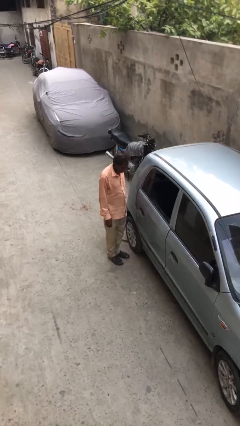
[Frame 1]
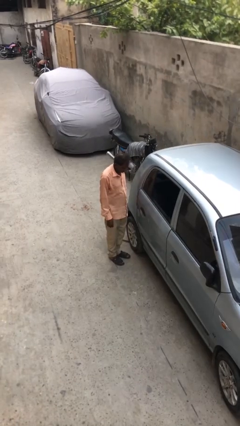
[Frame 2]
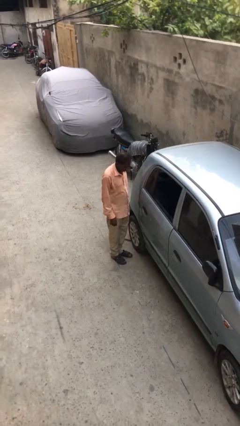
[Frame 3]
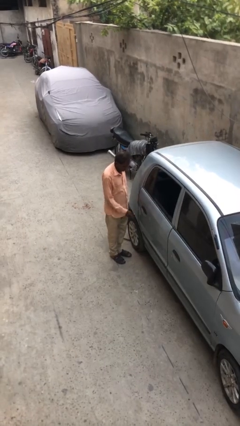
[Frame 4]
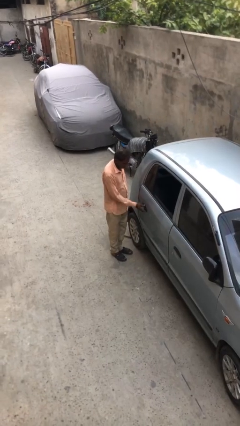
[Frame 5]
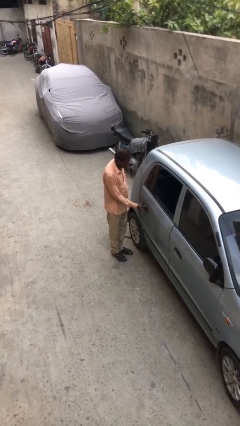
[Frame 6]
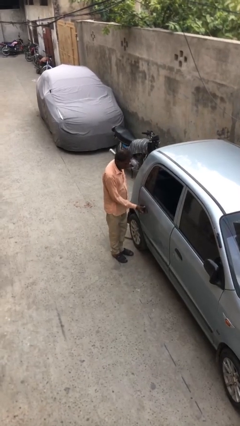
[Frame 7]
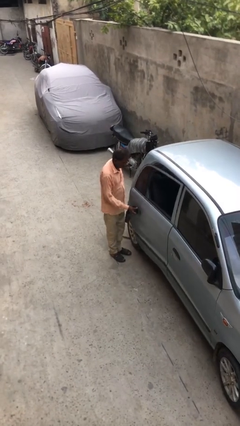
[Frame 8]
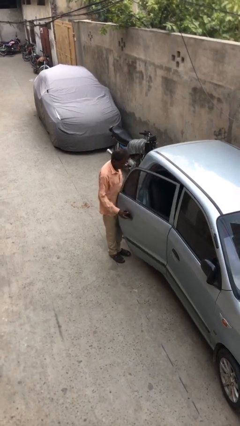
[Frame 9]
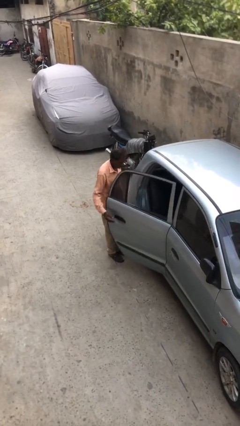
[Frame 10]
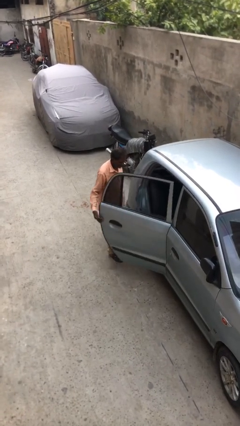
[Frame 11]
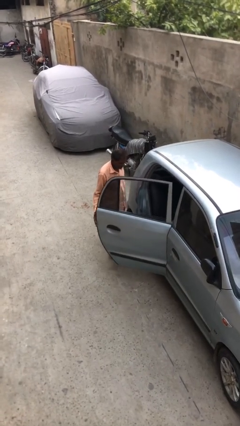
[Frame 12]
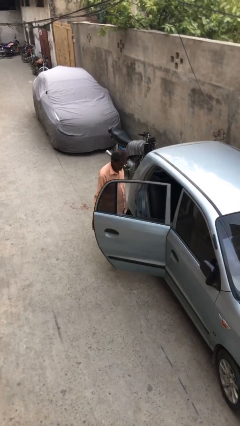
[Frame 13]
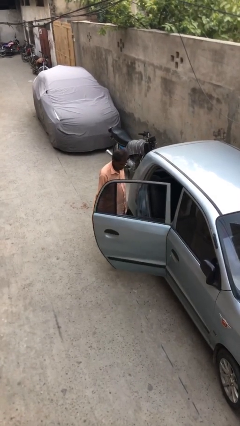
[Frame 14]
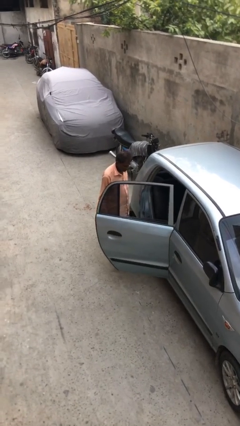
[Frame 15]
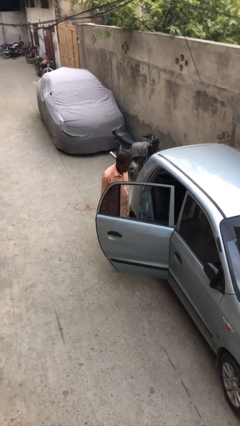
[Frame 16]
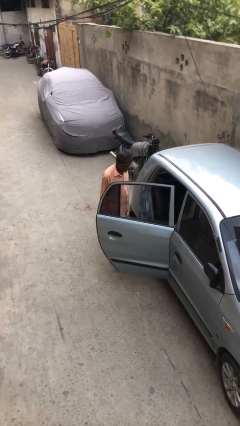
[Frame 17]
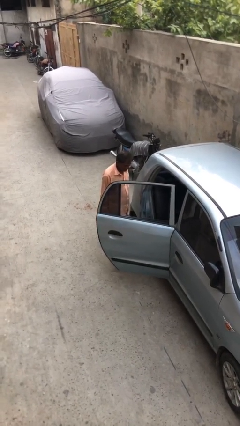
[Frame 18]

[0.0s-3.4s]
person opens car door

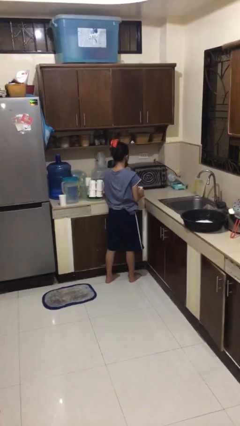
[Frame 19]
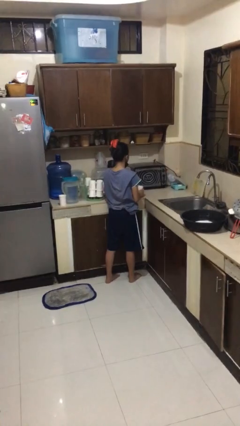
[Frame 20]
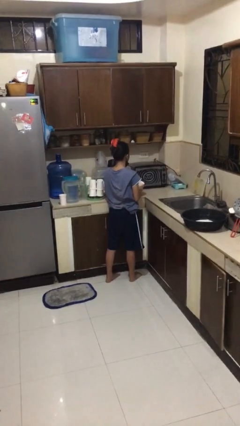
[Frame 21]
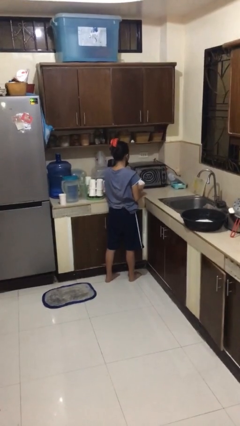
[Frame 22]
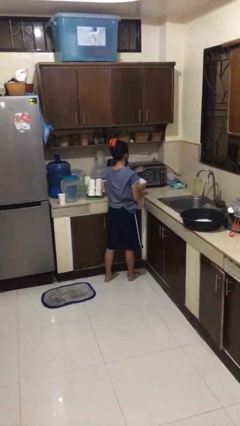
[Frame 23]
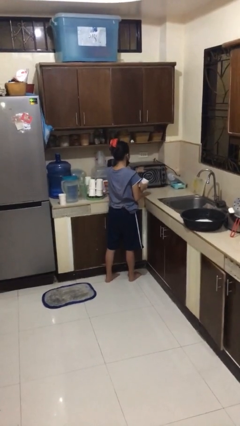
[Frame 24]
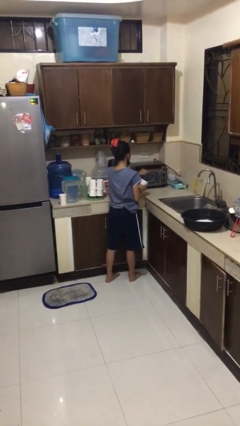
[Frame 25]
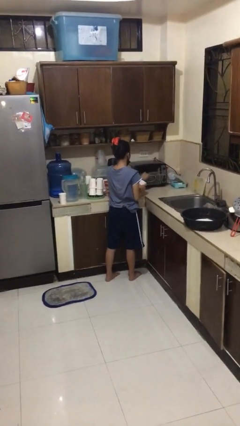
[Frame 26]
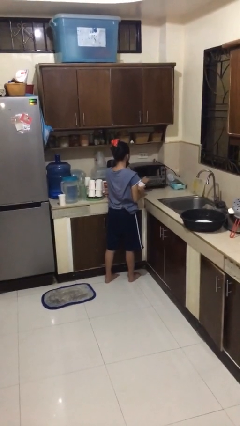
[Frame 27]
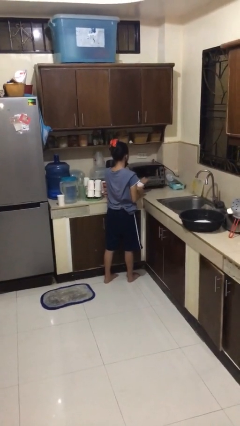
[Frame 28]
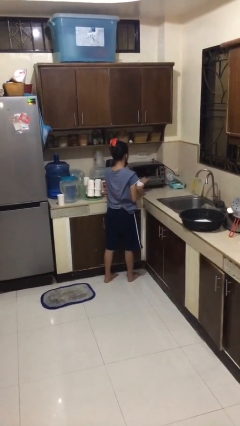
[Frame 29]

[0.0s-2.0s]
person opens microwave

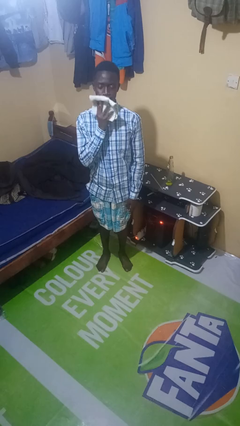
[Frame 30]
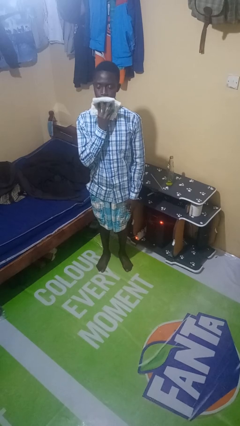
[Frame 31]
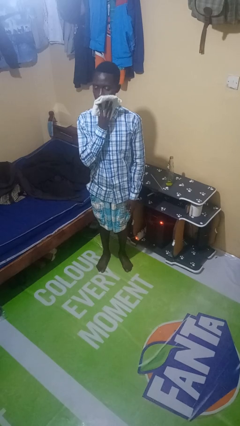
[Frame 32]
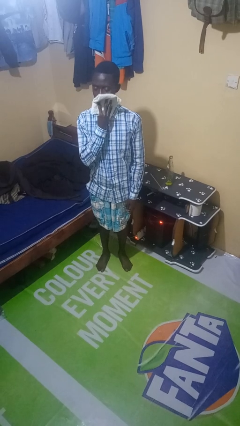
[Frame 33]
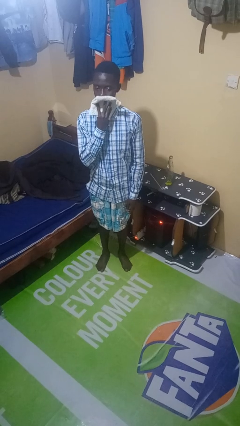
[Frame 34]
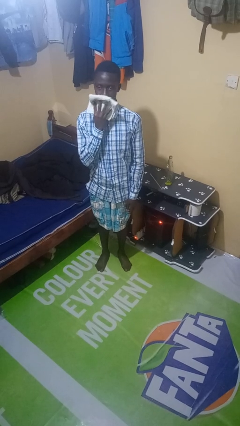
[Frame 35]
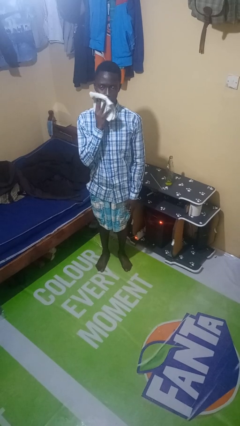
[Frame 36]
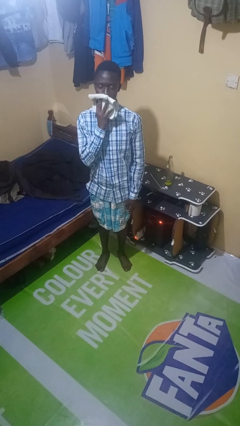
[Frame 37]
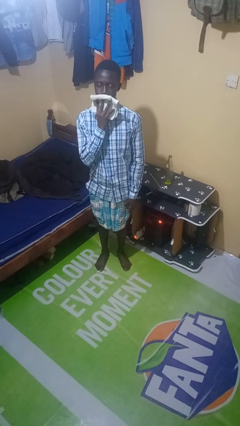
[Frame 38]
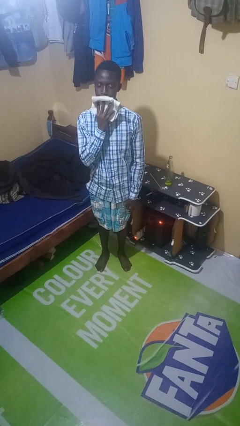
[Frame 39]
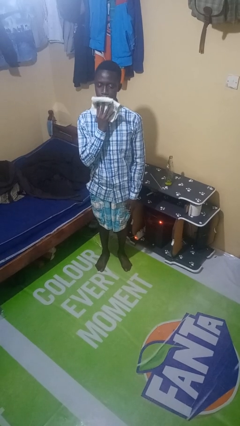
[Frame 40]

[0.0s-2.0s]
person wipes mouth with napkin

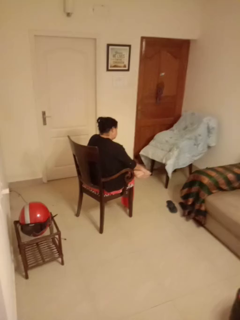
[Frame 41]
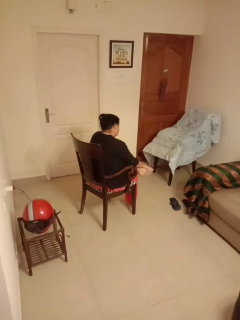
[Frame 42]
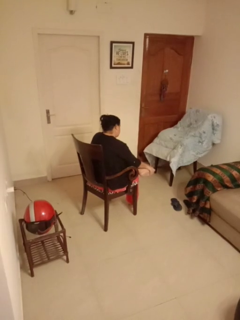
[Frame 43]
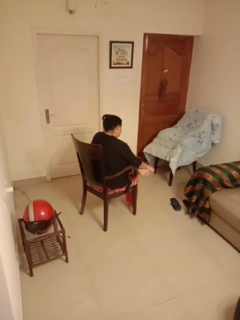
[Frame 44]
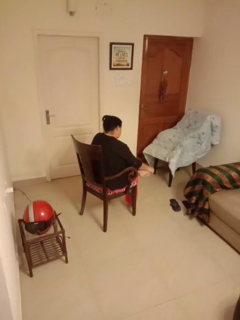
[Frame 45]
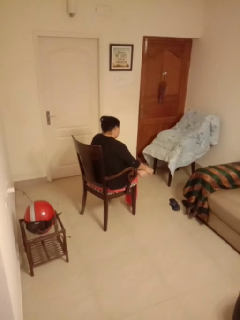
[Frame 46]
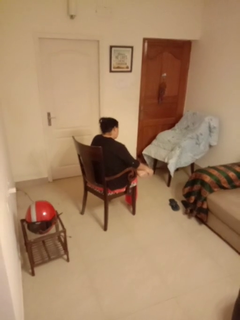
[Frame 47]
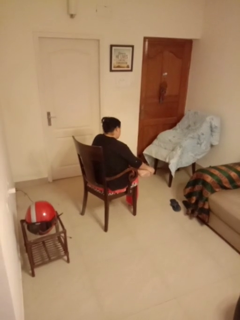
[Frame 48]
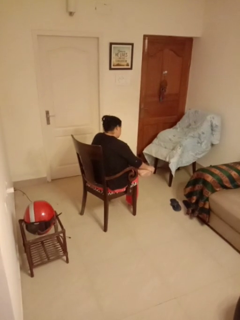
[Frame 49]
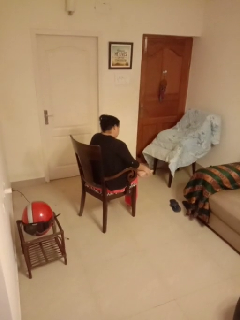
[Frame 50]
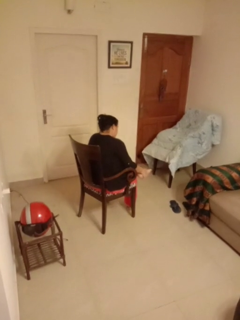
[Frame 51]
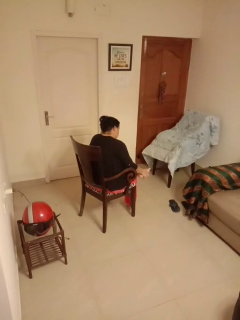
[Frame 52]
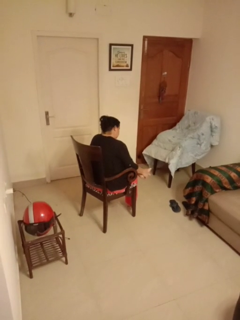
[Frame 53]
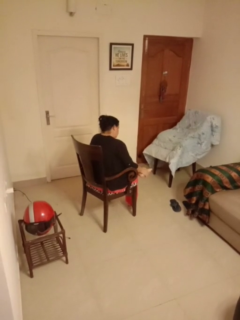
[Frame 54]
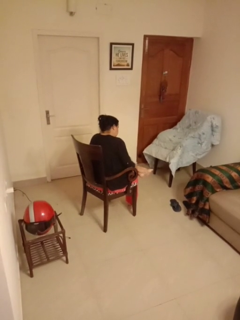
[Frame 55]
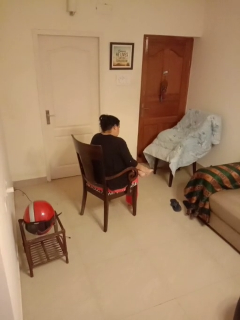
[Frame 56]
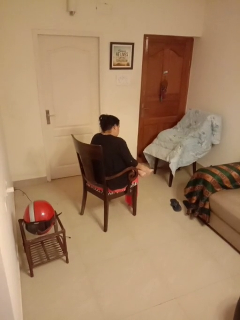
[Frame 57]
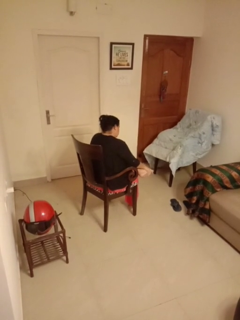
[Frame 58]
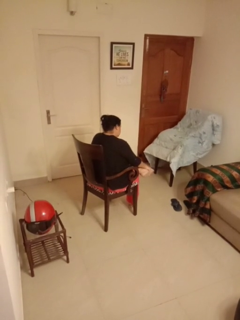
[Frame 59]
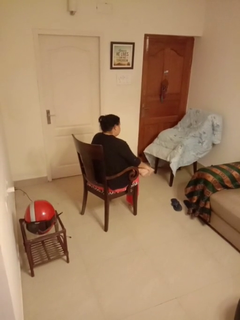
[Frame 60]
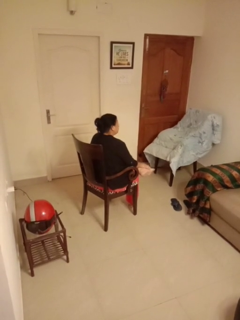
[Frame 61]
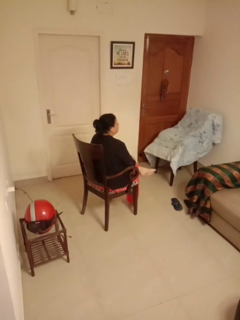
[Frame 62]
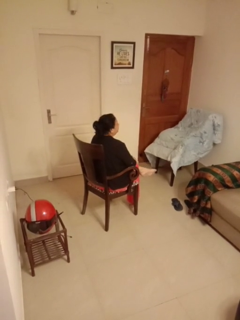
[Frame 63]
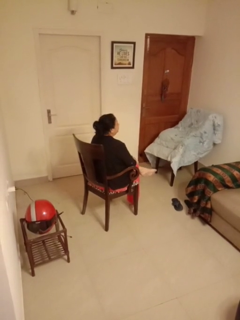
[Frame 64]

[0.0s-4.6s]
person rubs foot

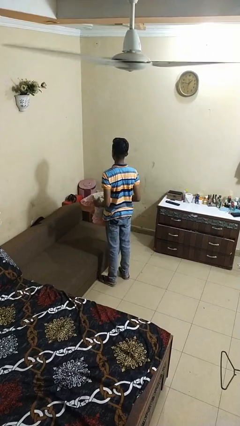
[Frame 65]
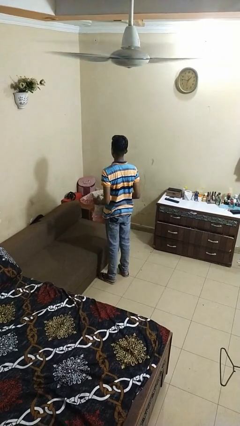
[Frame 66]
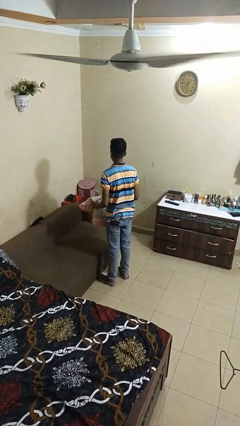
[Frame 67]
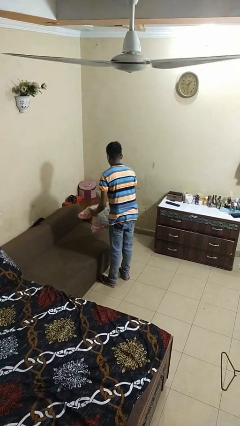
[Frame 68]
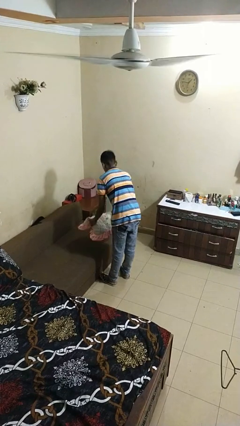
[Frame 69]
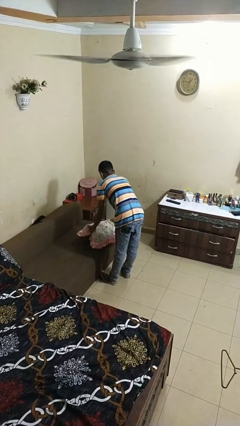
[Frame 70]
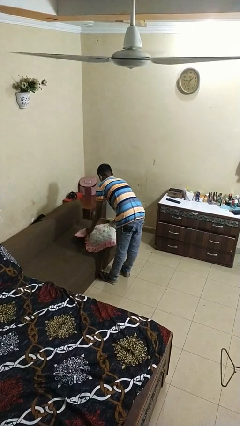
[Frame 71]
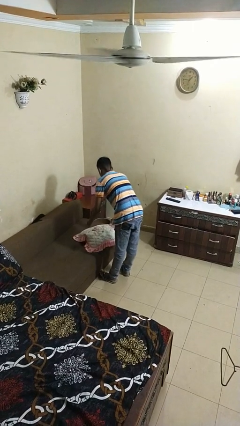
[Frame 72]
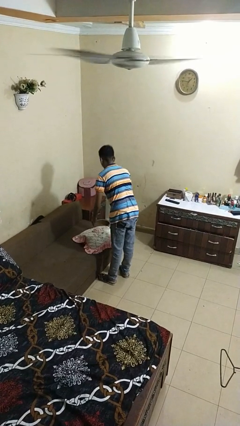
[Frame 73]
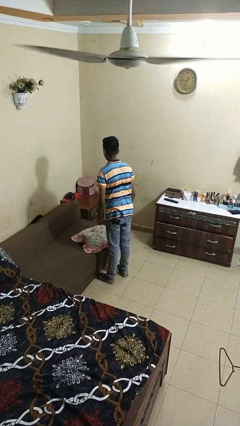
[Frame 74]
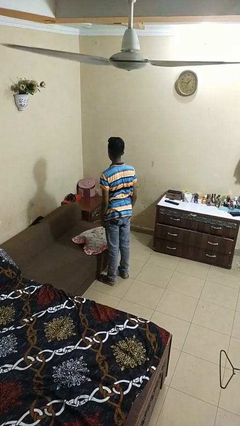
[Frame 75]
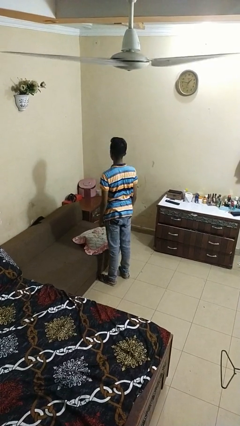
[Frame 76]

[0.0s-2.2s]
person puts down object on couch

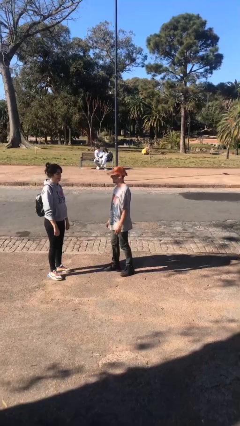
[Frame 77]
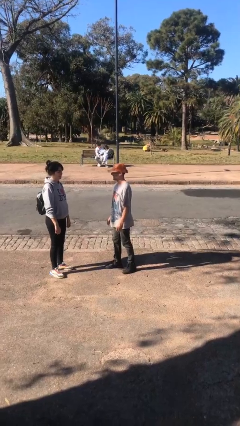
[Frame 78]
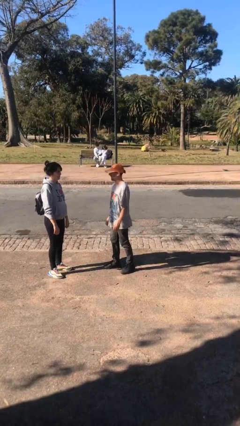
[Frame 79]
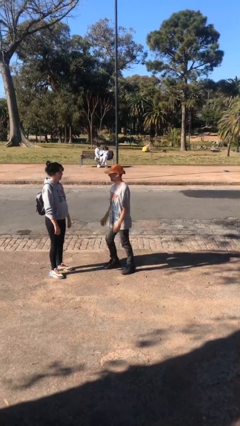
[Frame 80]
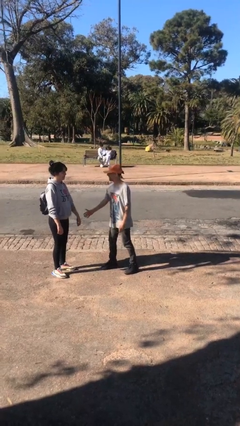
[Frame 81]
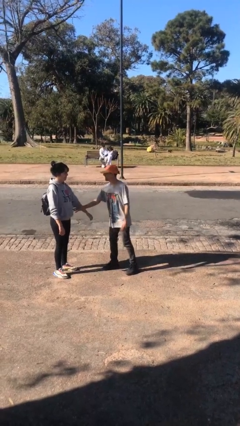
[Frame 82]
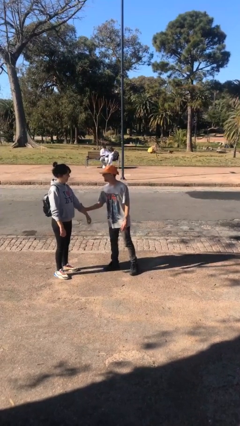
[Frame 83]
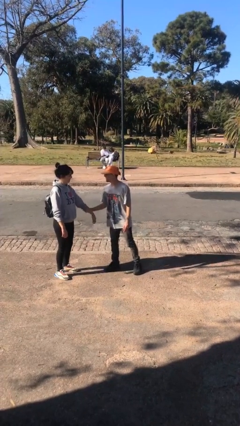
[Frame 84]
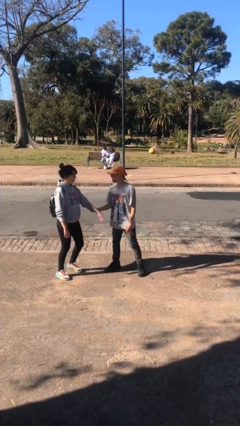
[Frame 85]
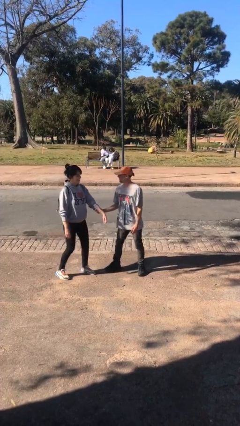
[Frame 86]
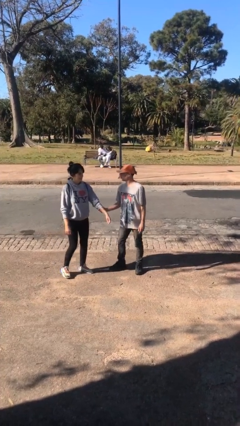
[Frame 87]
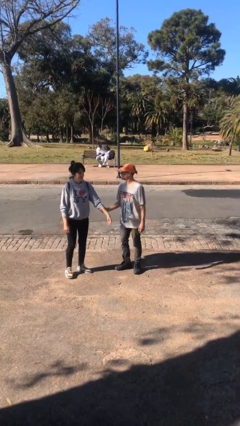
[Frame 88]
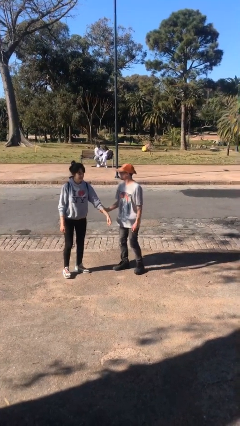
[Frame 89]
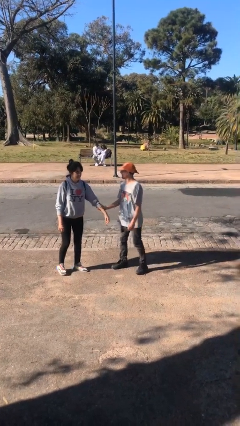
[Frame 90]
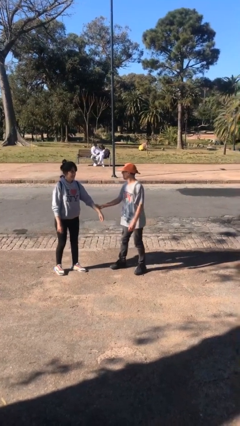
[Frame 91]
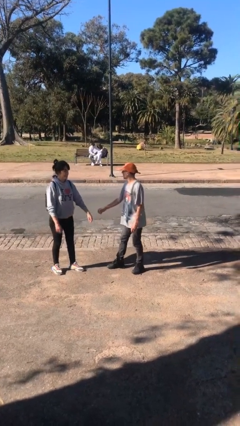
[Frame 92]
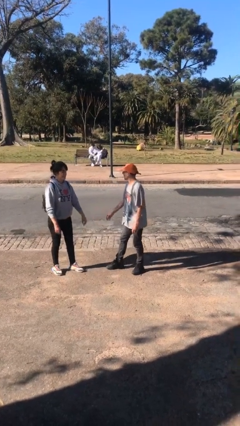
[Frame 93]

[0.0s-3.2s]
person grabs person by forearm

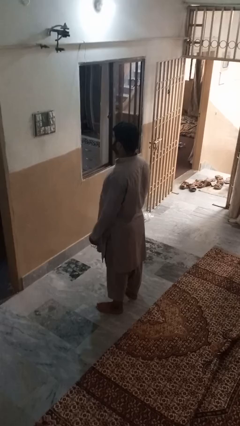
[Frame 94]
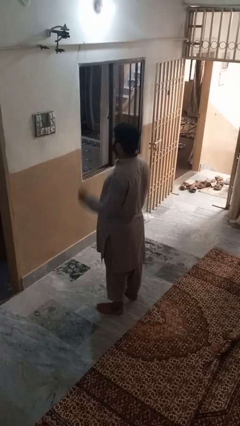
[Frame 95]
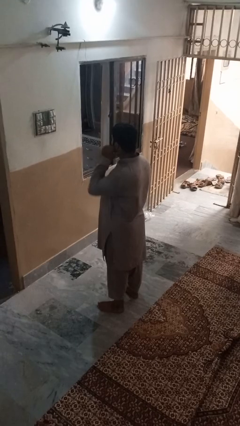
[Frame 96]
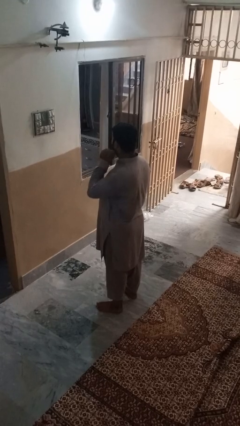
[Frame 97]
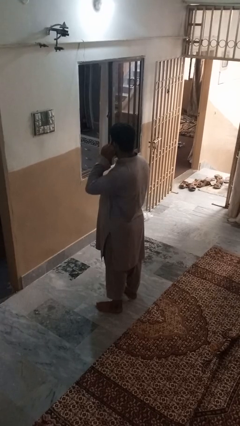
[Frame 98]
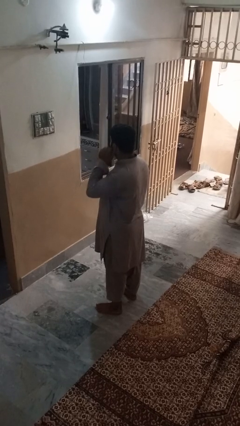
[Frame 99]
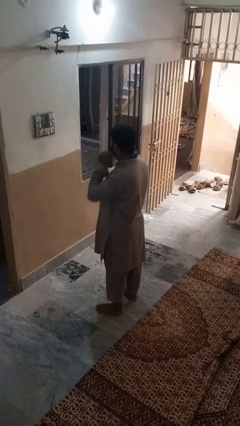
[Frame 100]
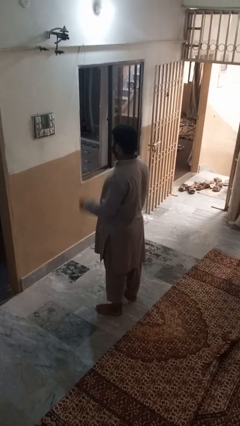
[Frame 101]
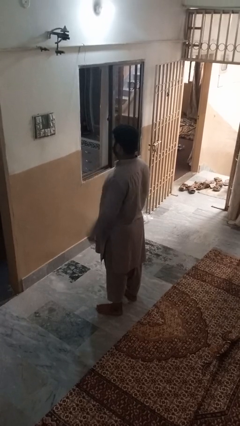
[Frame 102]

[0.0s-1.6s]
person touches earlobe
